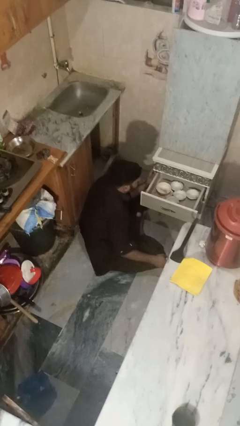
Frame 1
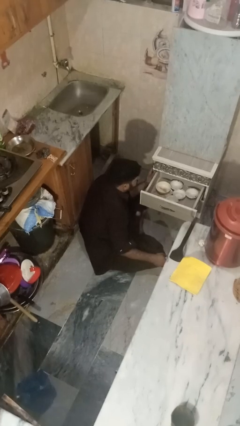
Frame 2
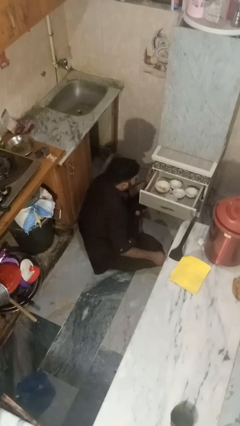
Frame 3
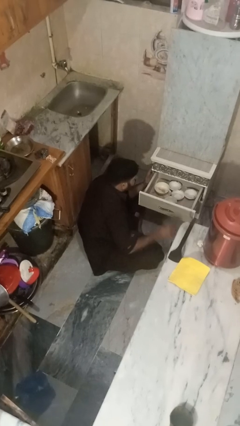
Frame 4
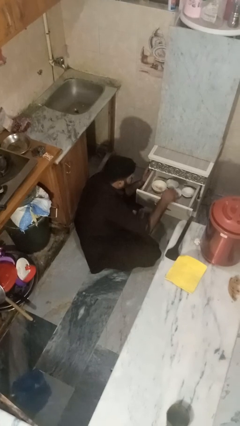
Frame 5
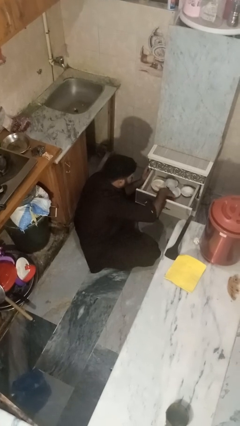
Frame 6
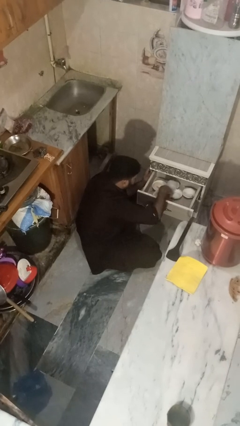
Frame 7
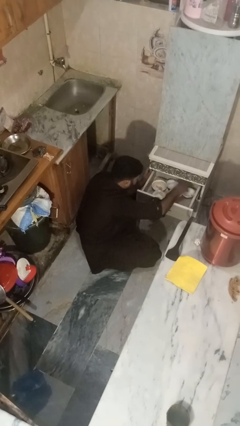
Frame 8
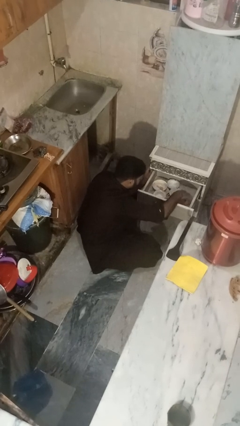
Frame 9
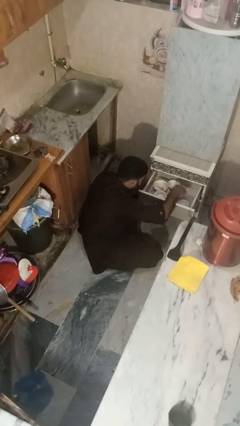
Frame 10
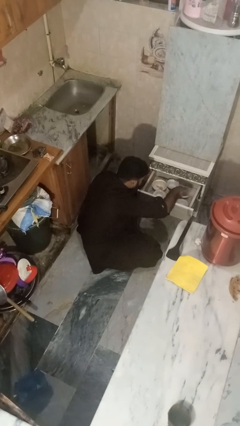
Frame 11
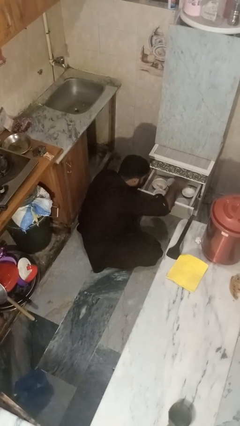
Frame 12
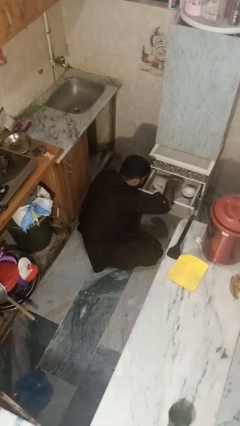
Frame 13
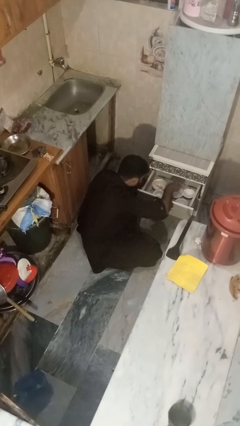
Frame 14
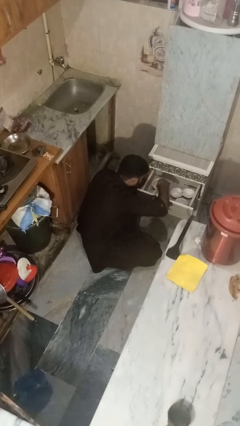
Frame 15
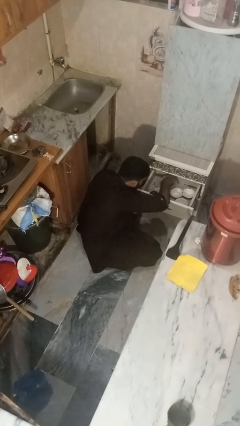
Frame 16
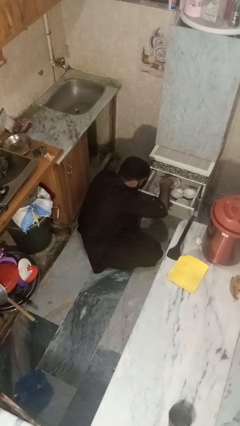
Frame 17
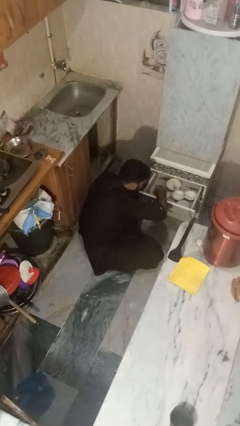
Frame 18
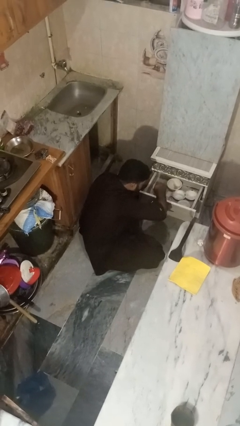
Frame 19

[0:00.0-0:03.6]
person searches in kitchen drawer

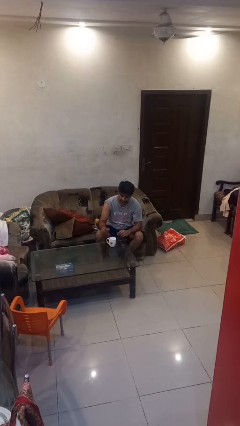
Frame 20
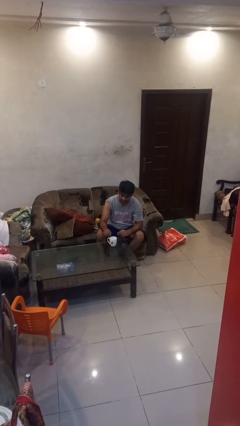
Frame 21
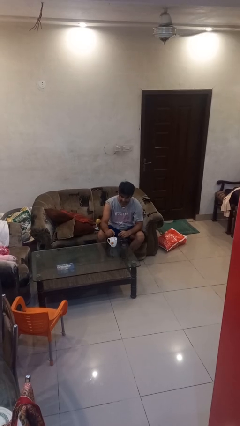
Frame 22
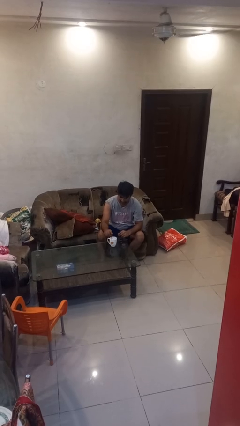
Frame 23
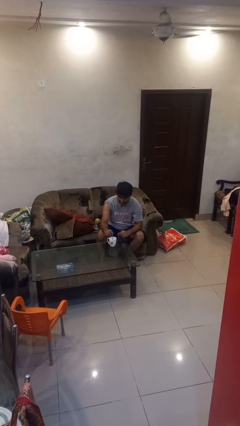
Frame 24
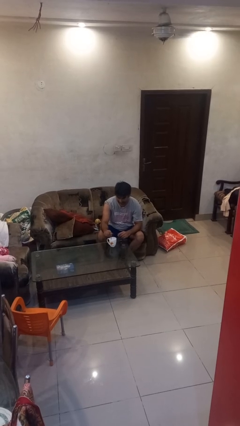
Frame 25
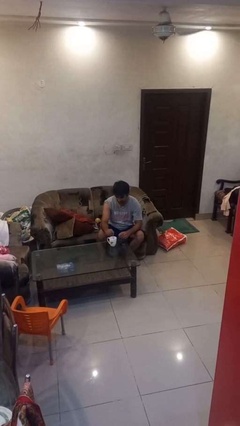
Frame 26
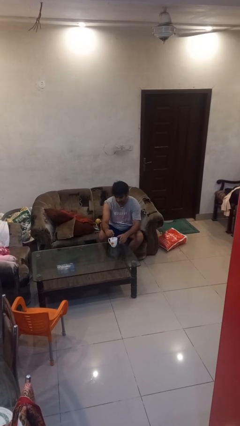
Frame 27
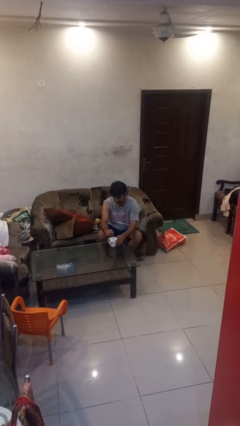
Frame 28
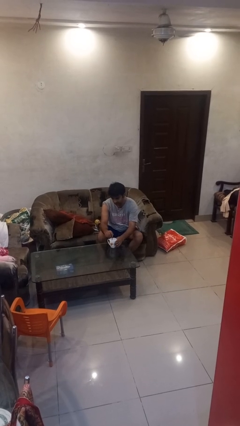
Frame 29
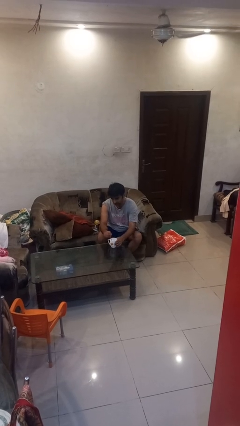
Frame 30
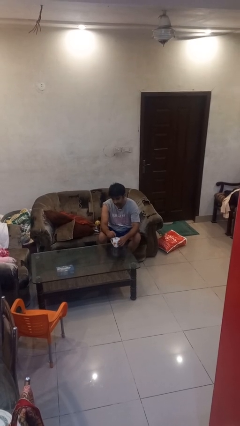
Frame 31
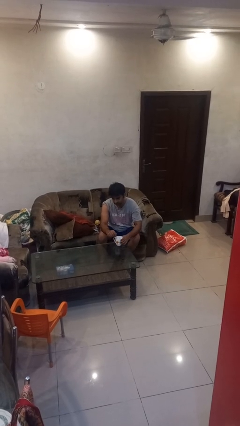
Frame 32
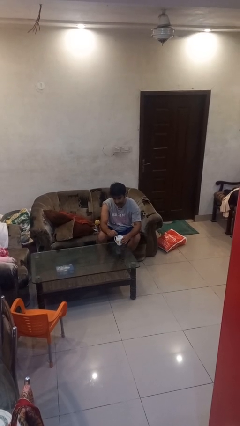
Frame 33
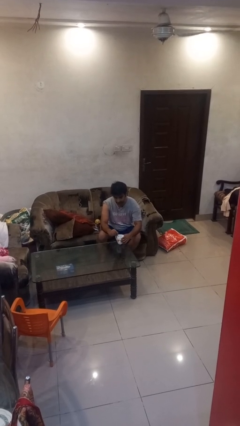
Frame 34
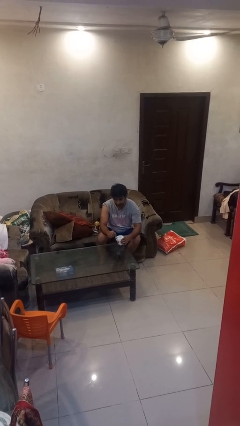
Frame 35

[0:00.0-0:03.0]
person stirs mug

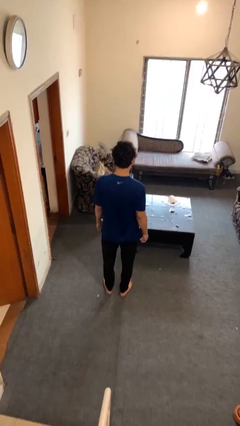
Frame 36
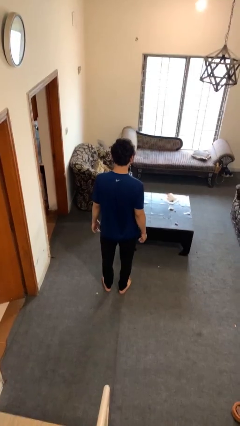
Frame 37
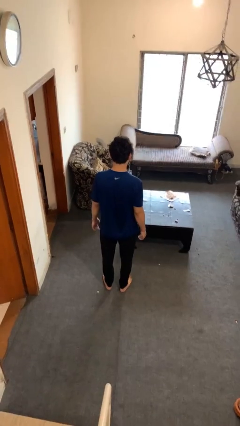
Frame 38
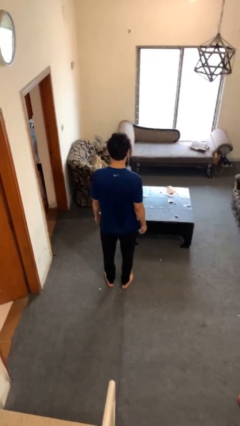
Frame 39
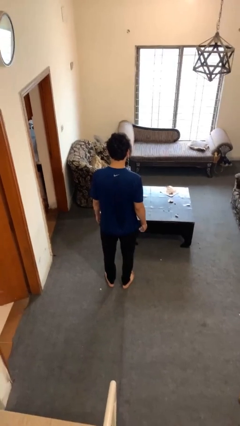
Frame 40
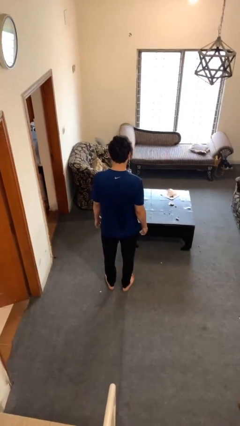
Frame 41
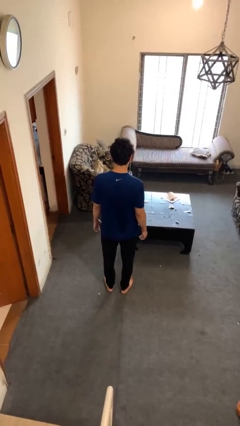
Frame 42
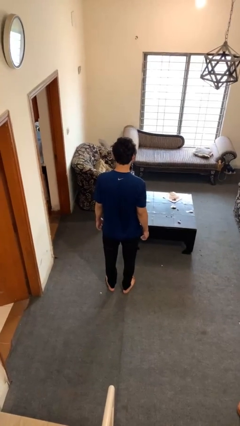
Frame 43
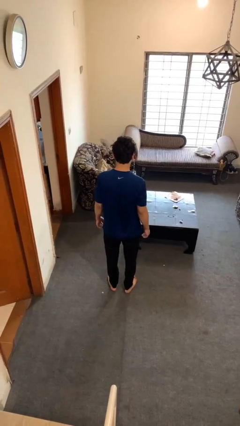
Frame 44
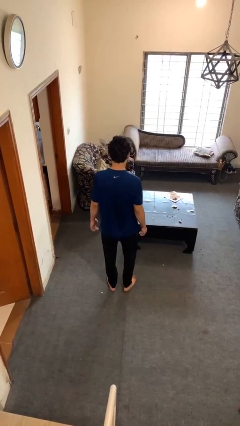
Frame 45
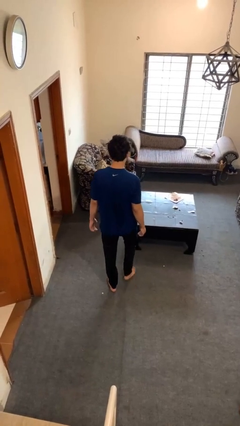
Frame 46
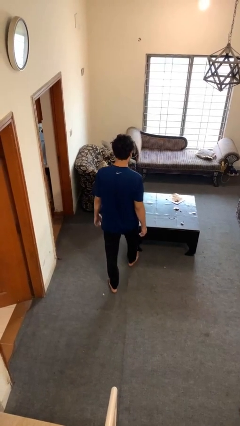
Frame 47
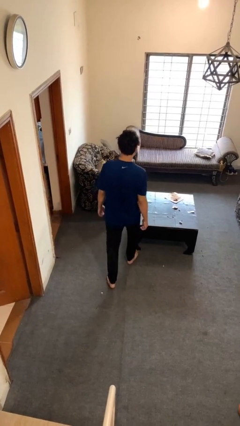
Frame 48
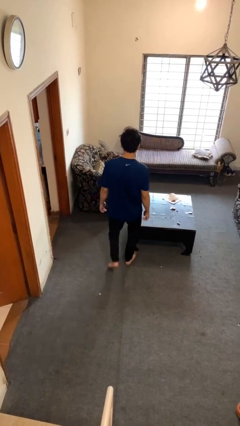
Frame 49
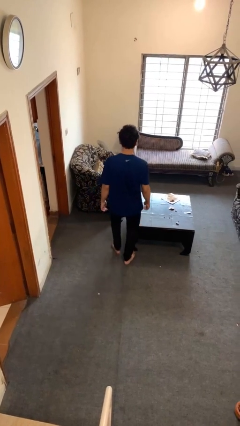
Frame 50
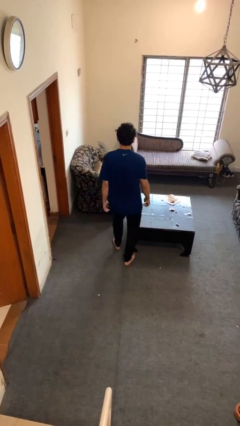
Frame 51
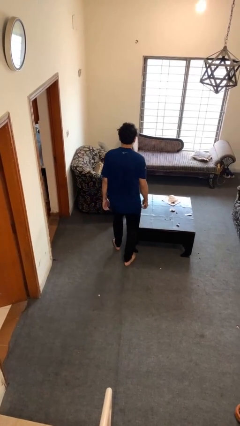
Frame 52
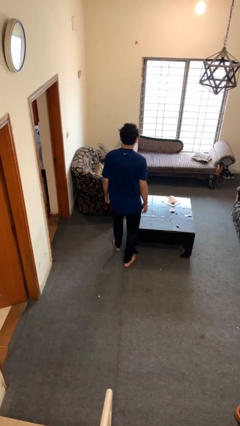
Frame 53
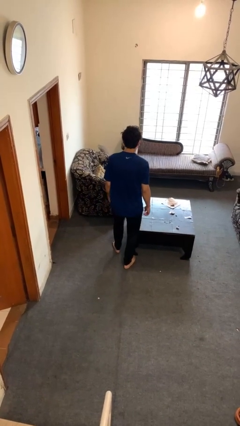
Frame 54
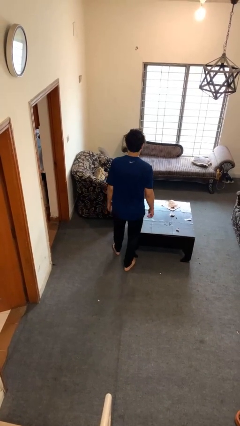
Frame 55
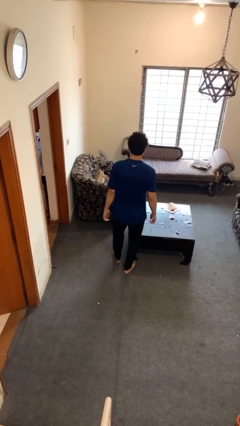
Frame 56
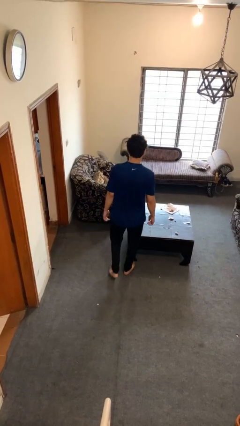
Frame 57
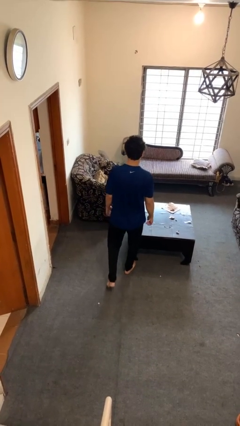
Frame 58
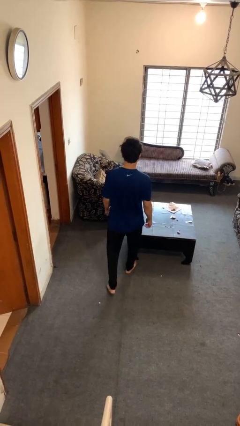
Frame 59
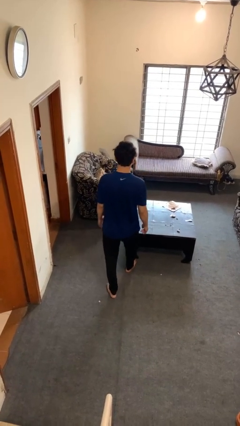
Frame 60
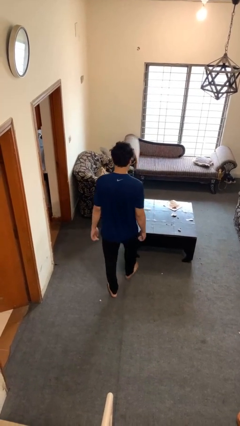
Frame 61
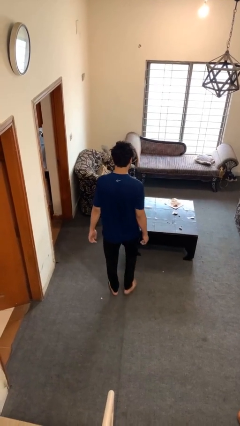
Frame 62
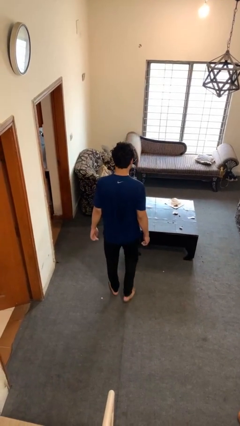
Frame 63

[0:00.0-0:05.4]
person bumps into table

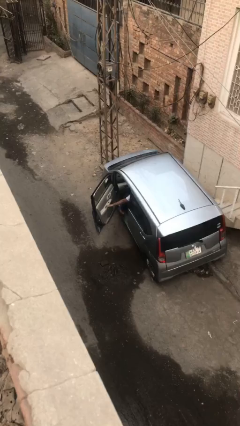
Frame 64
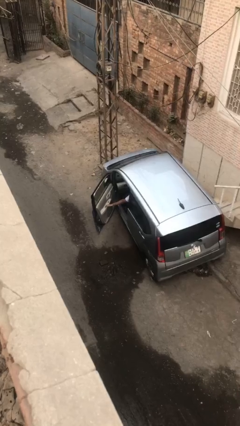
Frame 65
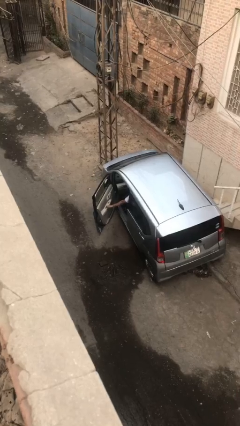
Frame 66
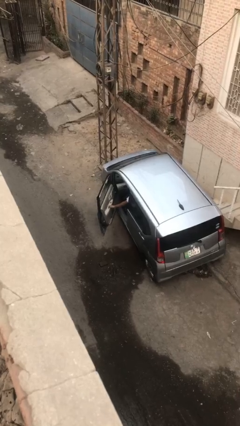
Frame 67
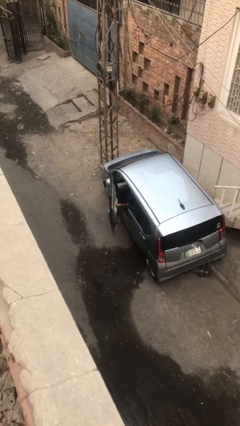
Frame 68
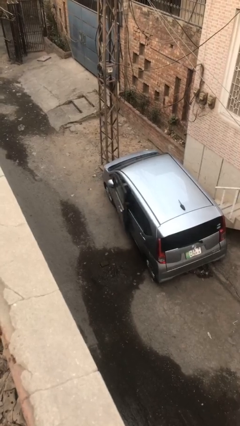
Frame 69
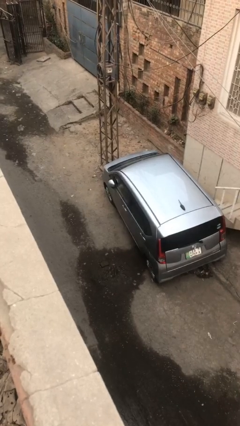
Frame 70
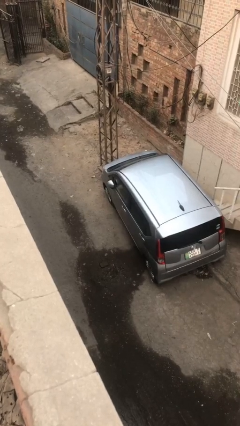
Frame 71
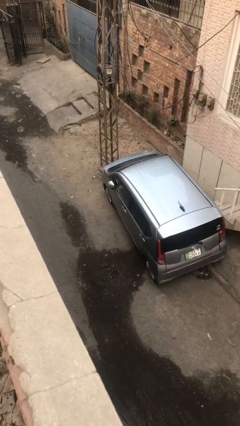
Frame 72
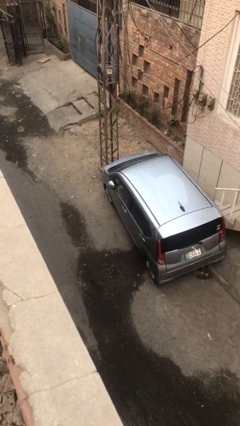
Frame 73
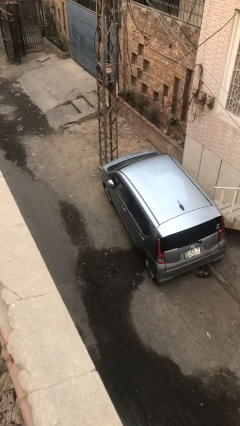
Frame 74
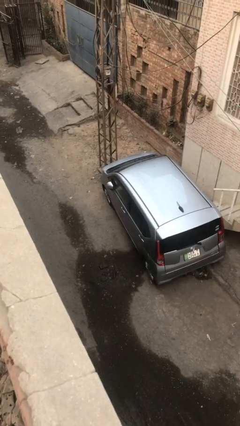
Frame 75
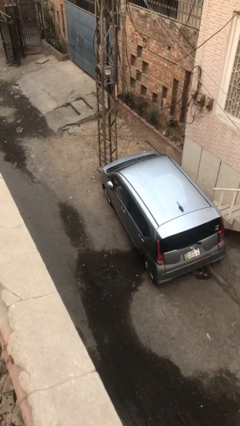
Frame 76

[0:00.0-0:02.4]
person closes car door

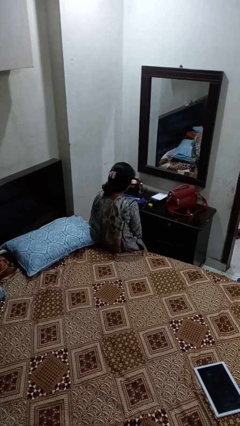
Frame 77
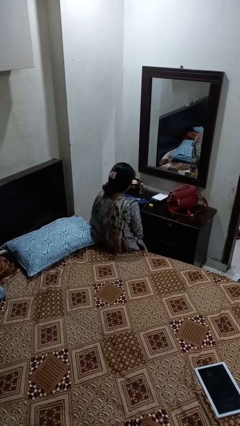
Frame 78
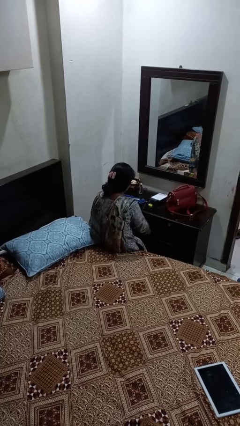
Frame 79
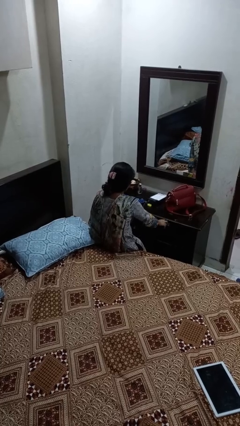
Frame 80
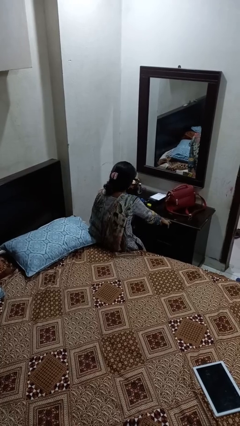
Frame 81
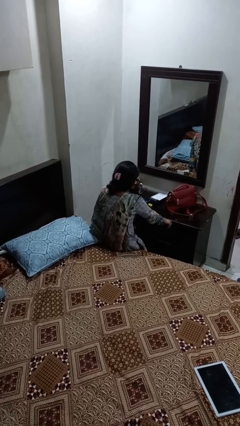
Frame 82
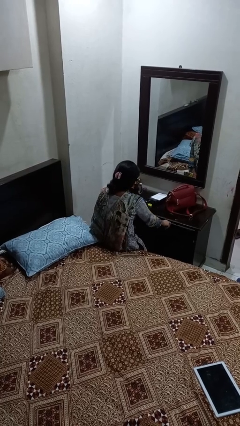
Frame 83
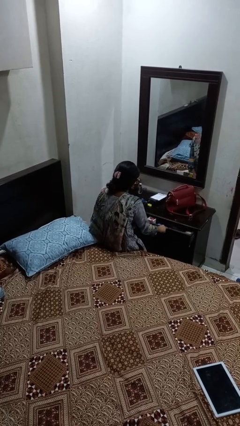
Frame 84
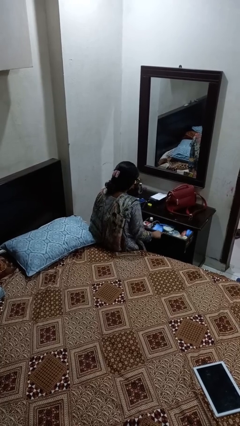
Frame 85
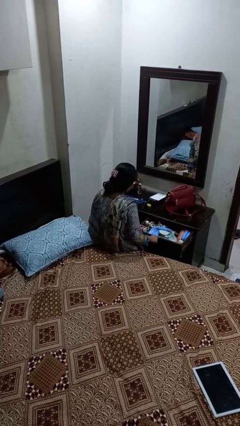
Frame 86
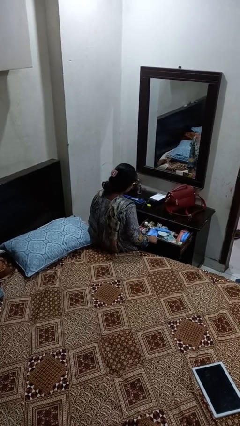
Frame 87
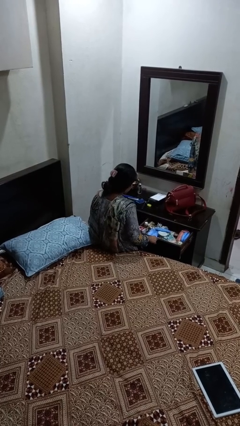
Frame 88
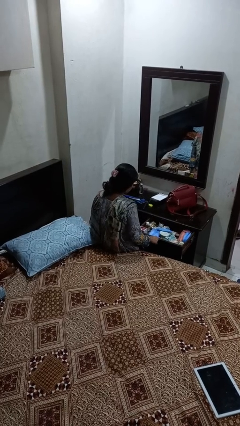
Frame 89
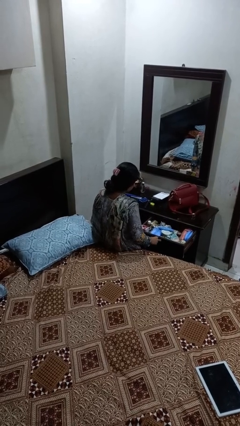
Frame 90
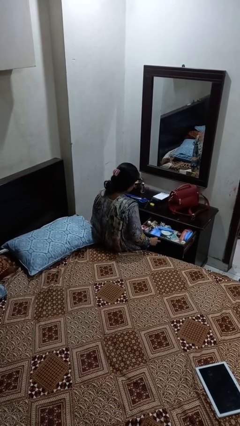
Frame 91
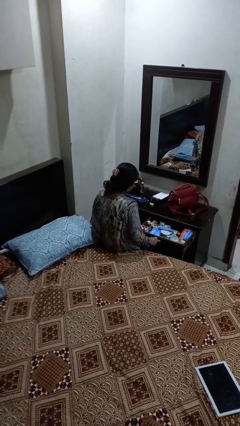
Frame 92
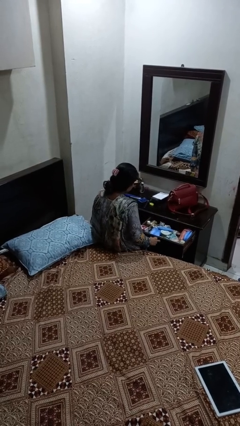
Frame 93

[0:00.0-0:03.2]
person opens dresser drawer
